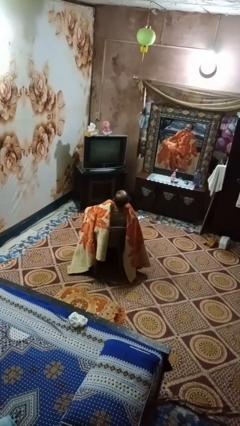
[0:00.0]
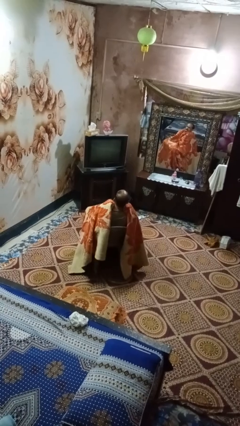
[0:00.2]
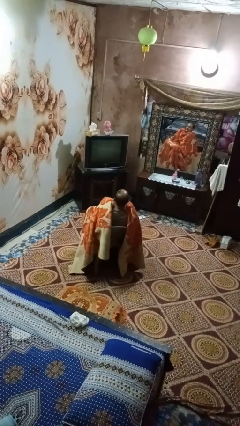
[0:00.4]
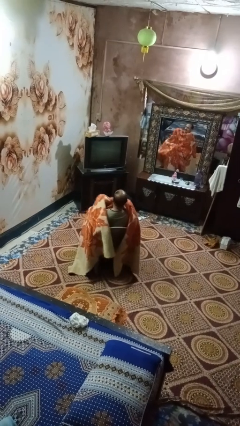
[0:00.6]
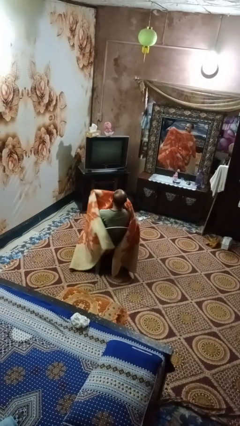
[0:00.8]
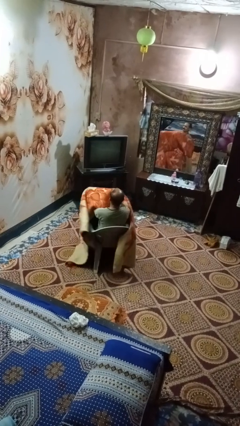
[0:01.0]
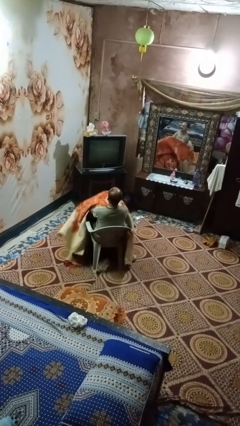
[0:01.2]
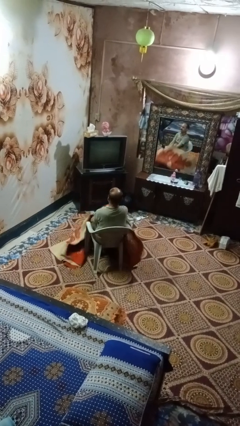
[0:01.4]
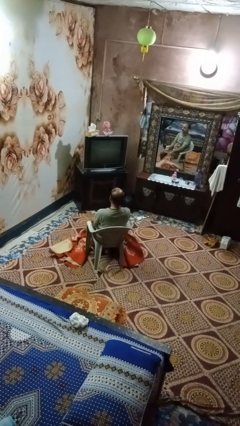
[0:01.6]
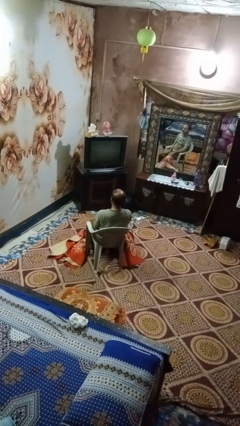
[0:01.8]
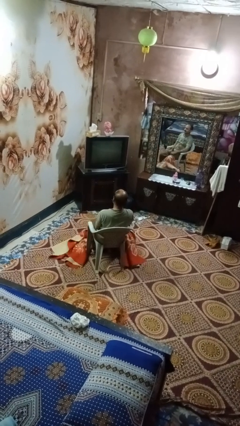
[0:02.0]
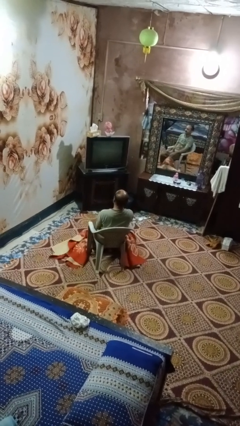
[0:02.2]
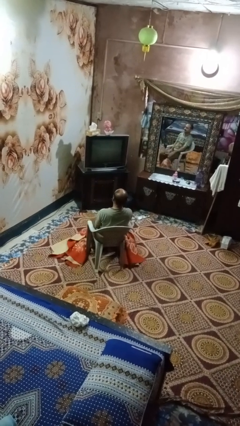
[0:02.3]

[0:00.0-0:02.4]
person uncovers with blanket

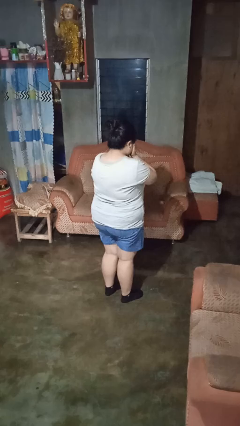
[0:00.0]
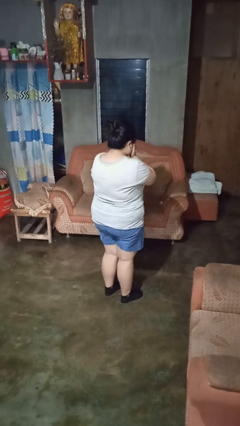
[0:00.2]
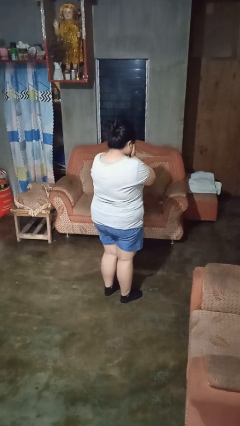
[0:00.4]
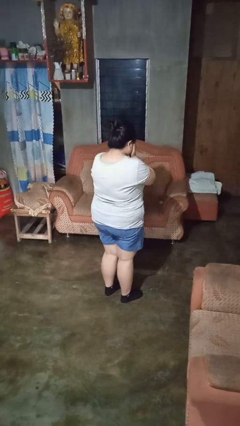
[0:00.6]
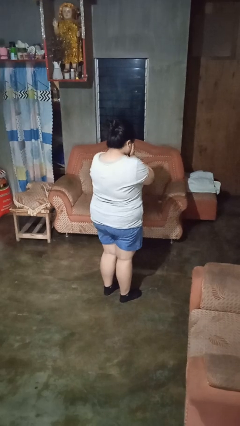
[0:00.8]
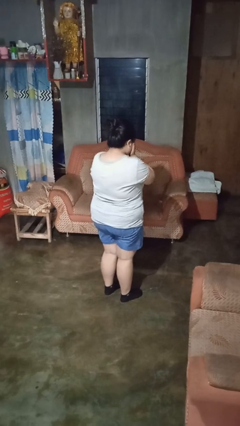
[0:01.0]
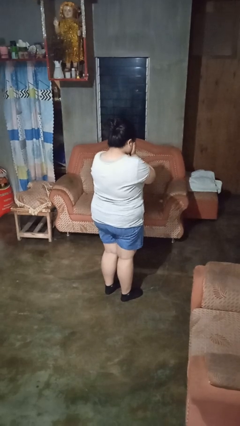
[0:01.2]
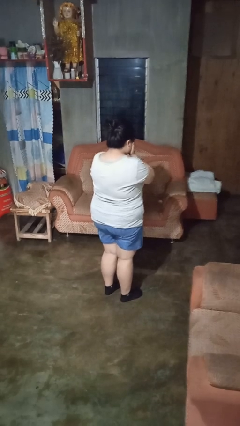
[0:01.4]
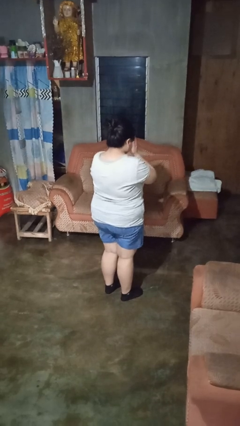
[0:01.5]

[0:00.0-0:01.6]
person covers face with hands

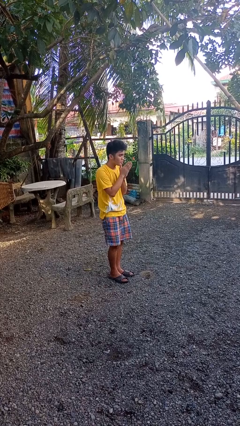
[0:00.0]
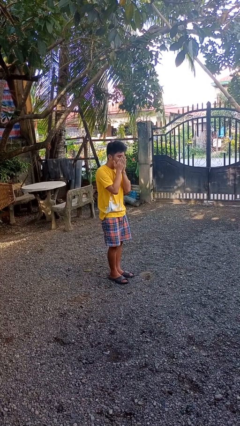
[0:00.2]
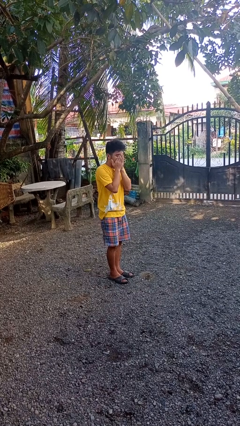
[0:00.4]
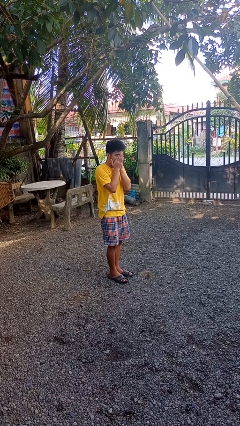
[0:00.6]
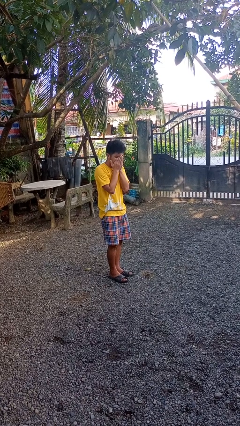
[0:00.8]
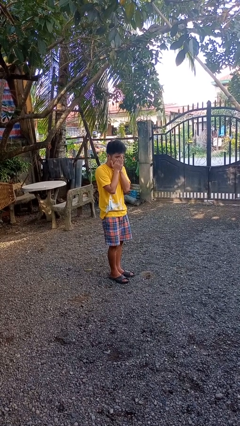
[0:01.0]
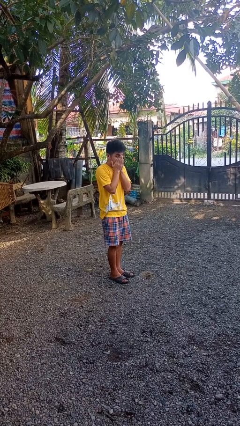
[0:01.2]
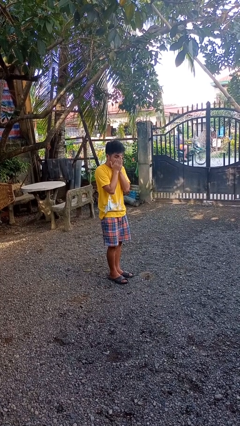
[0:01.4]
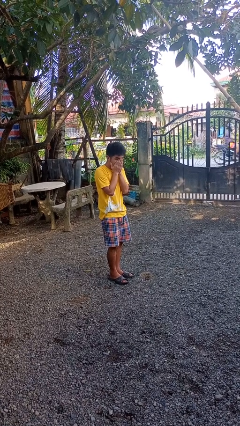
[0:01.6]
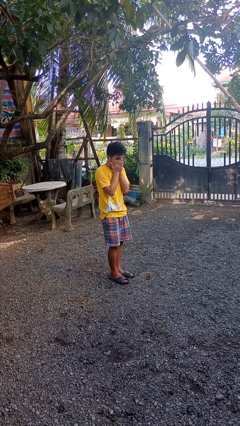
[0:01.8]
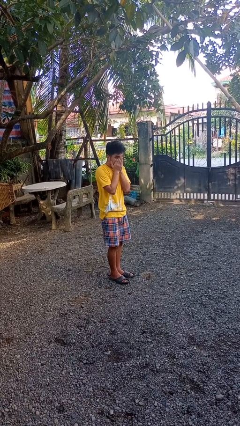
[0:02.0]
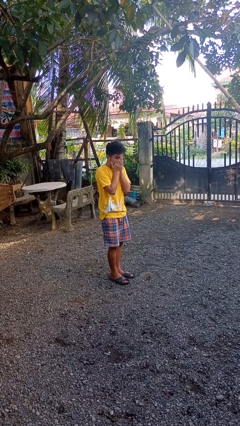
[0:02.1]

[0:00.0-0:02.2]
person blows into hands

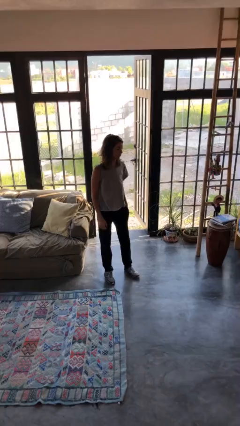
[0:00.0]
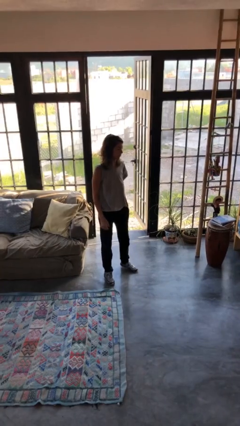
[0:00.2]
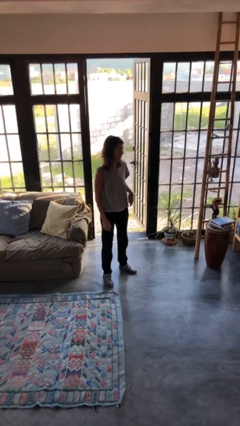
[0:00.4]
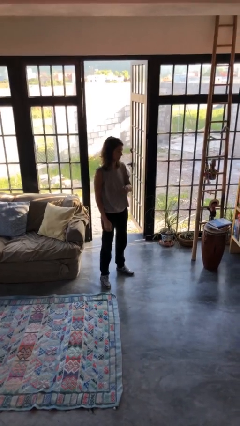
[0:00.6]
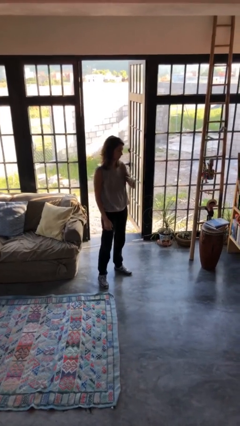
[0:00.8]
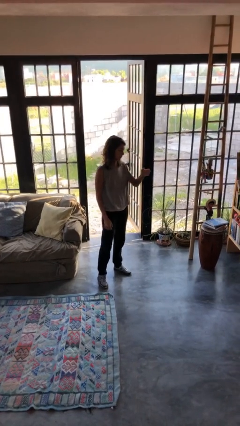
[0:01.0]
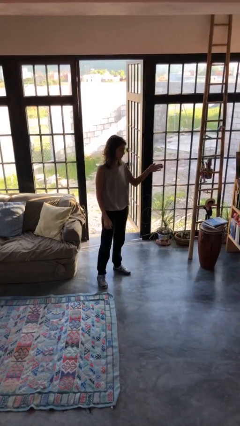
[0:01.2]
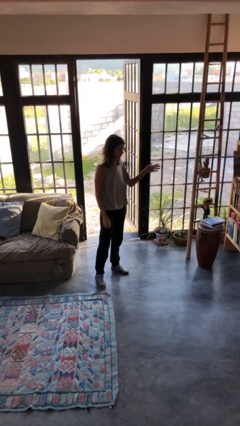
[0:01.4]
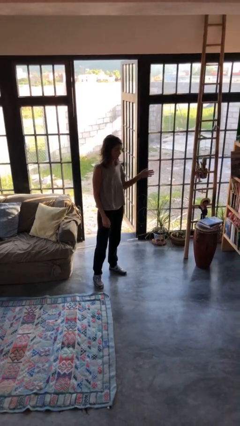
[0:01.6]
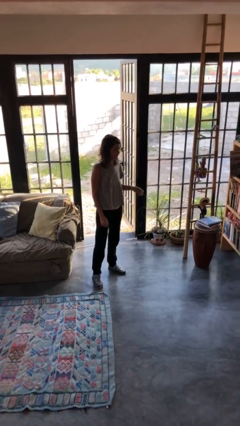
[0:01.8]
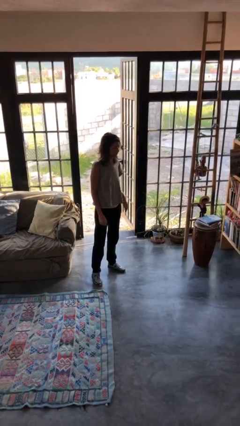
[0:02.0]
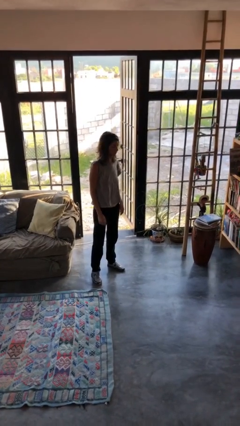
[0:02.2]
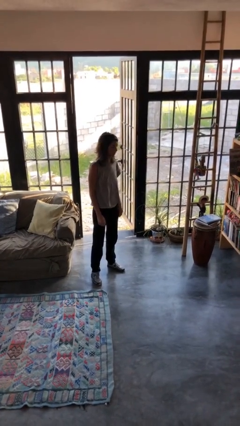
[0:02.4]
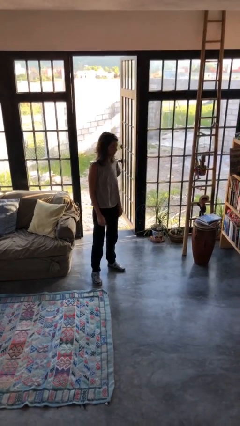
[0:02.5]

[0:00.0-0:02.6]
person gestures swipe left

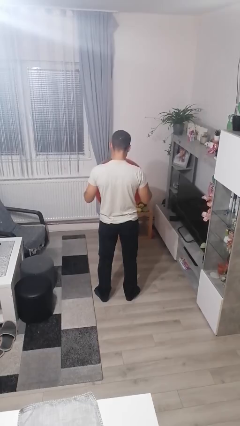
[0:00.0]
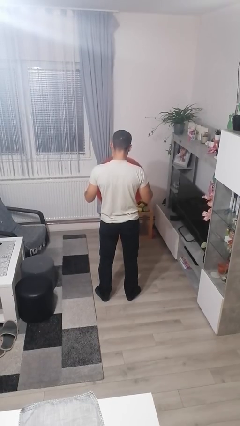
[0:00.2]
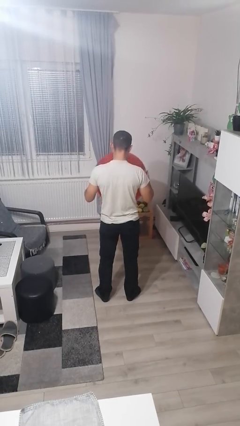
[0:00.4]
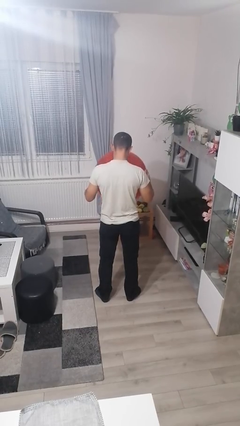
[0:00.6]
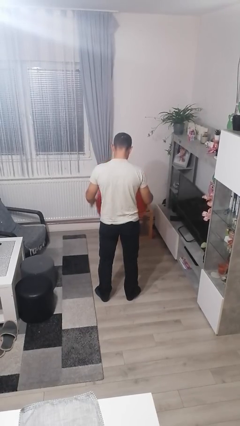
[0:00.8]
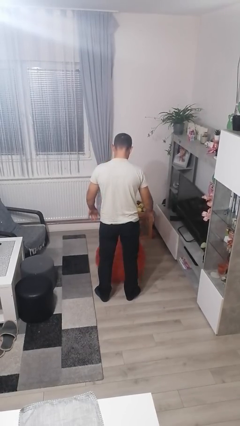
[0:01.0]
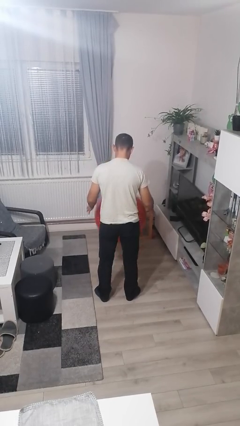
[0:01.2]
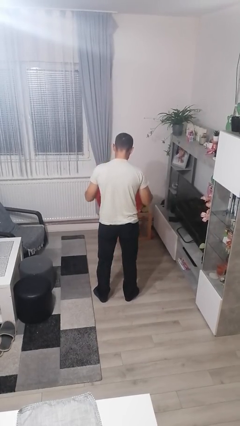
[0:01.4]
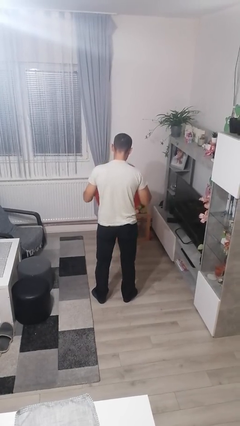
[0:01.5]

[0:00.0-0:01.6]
person bounces ball on floor

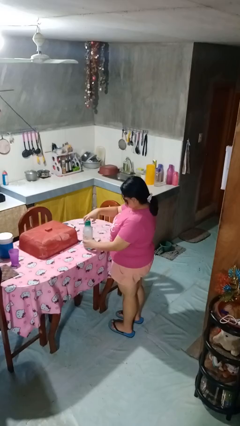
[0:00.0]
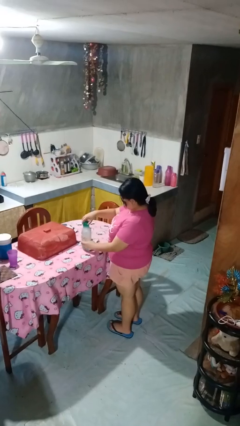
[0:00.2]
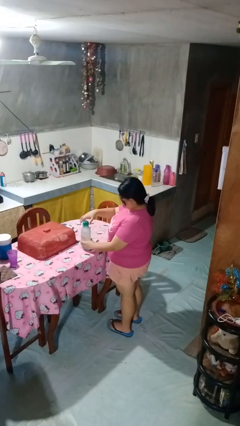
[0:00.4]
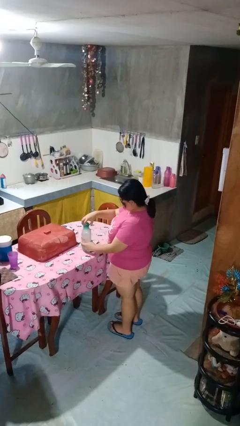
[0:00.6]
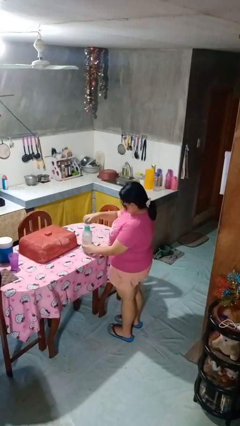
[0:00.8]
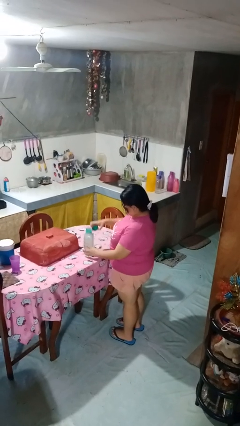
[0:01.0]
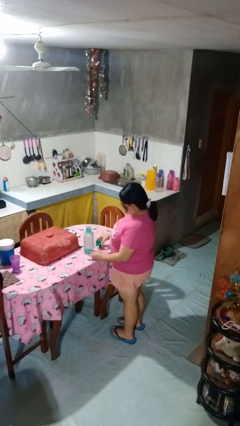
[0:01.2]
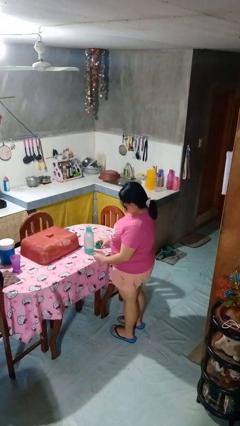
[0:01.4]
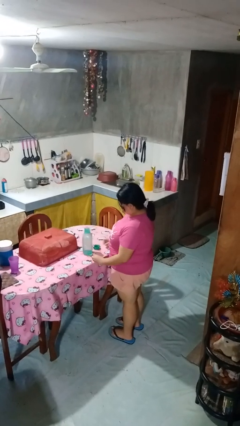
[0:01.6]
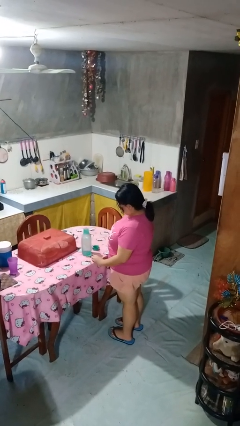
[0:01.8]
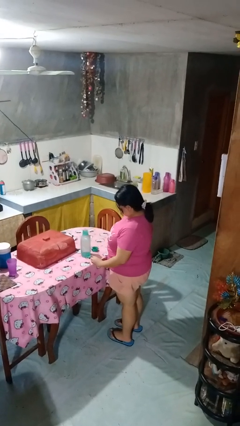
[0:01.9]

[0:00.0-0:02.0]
person unscrews lid from bottle

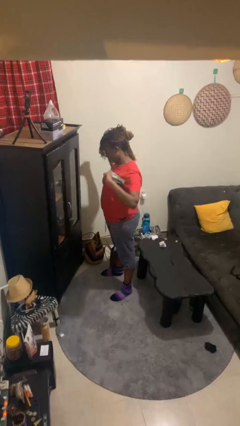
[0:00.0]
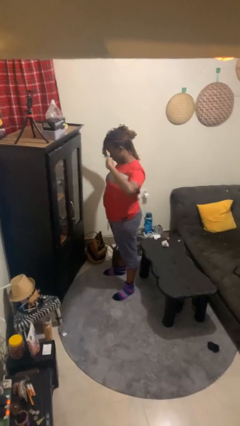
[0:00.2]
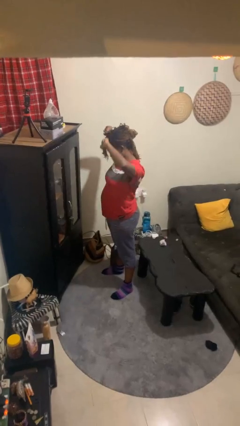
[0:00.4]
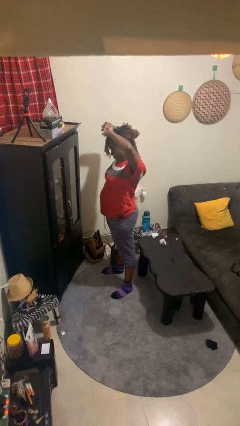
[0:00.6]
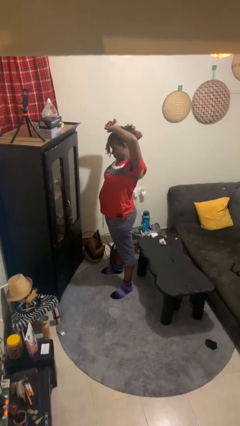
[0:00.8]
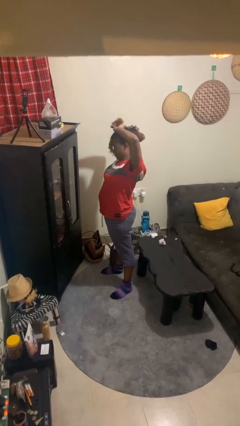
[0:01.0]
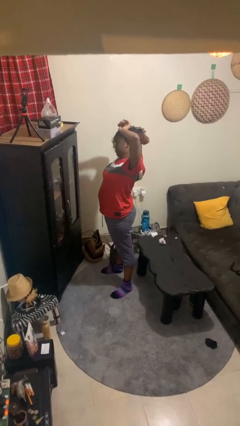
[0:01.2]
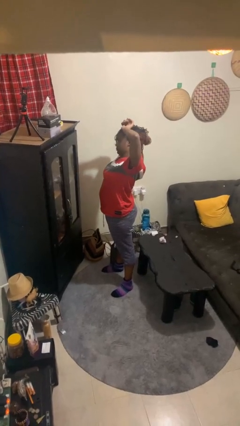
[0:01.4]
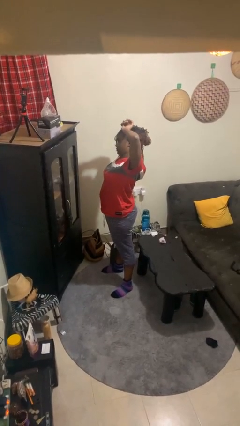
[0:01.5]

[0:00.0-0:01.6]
person stretches arms over head

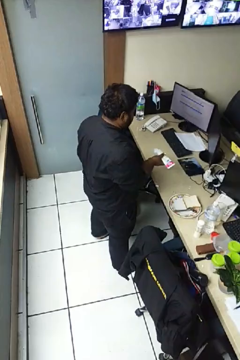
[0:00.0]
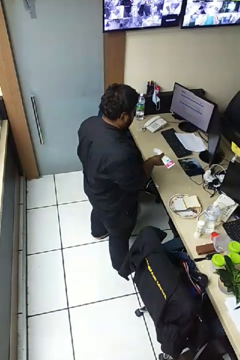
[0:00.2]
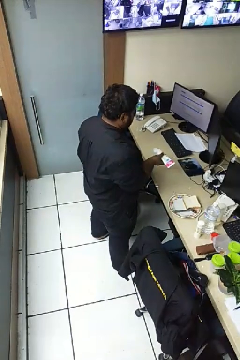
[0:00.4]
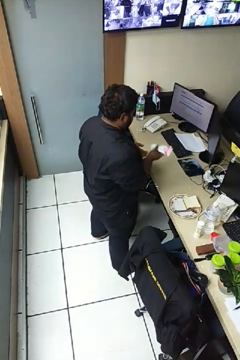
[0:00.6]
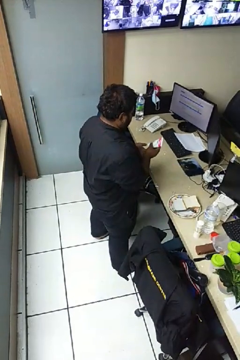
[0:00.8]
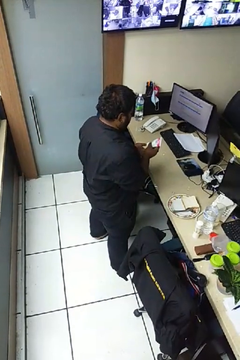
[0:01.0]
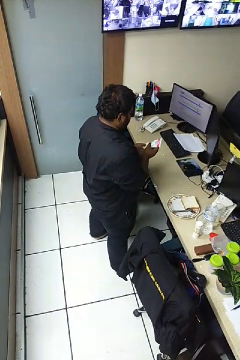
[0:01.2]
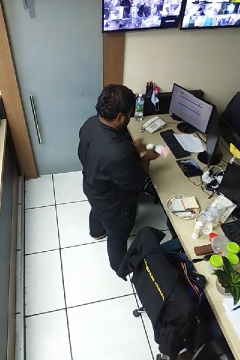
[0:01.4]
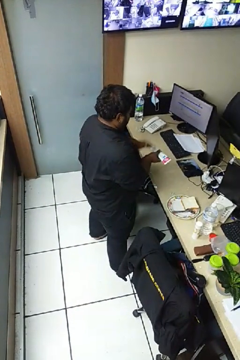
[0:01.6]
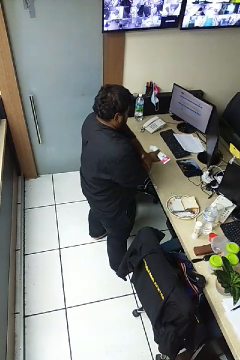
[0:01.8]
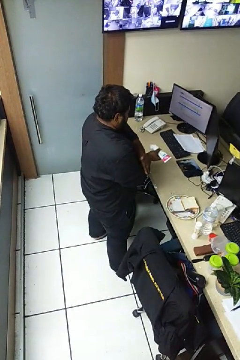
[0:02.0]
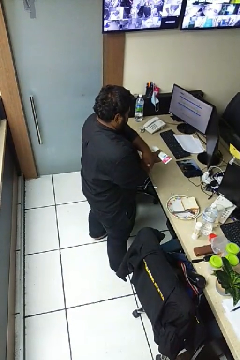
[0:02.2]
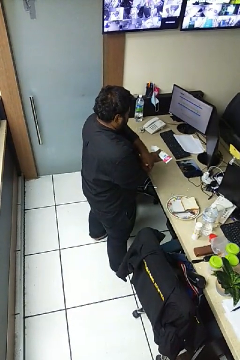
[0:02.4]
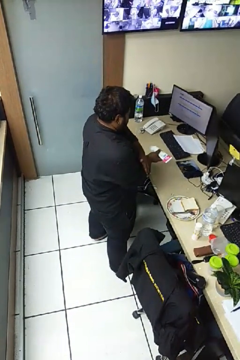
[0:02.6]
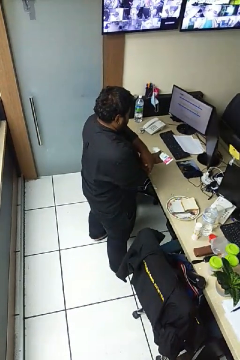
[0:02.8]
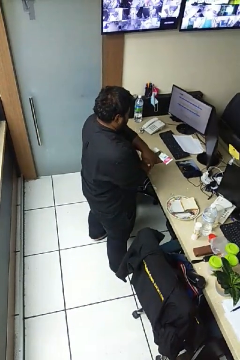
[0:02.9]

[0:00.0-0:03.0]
person applies sunscreen

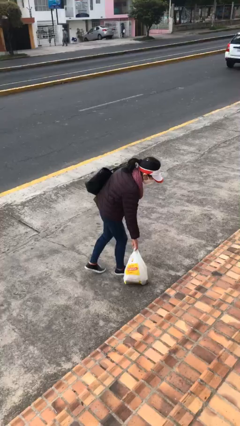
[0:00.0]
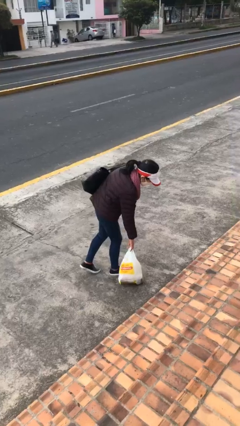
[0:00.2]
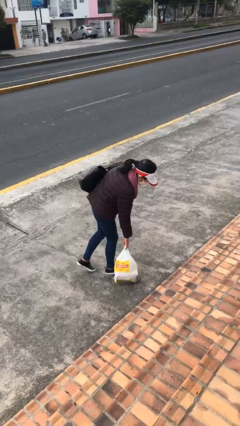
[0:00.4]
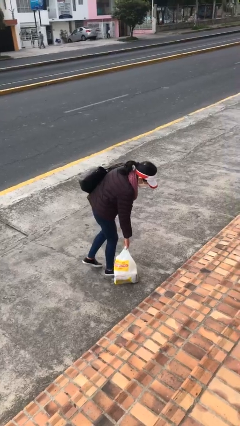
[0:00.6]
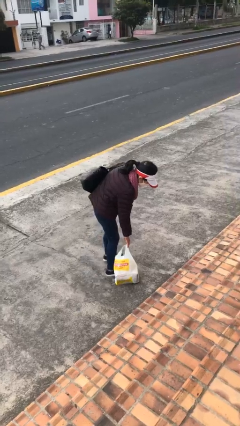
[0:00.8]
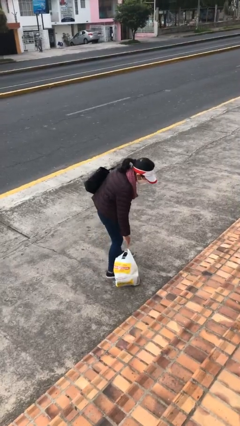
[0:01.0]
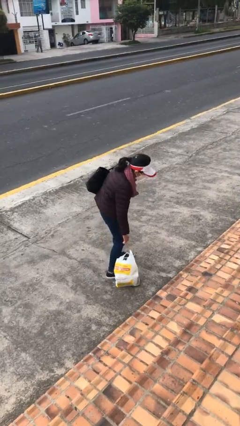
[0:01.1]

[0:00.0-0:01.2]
person puts down object on floor
